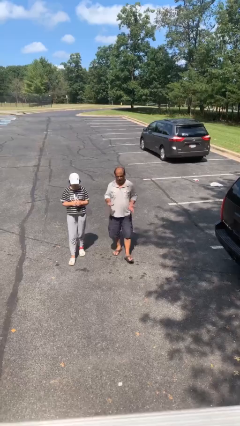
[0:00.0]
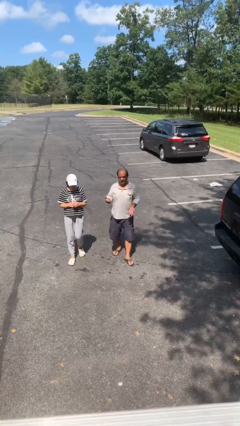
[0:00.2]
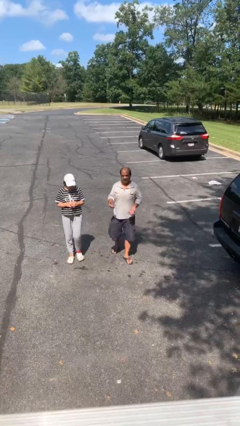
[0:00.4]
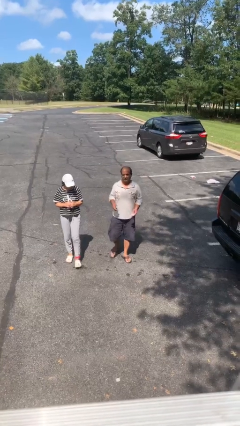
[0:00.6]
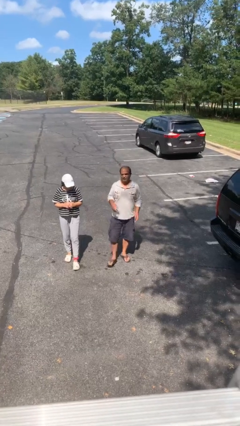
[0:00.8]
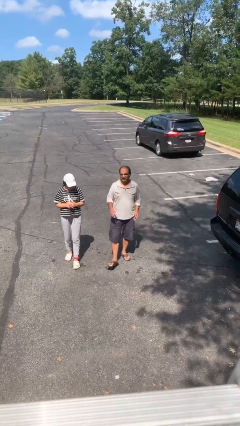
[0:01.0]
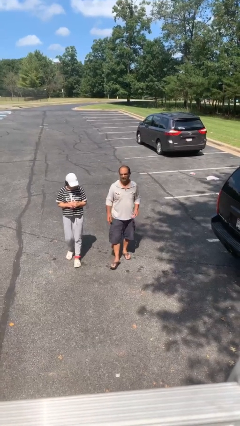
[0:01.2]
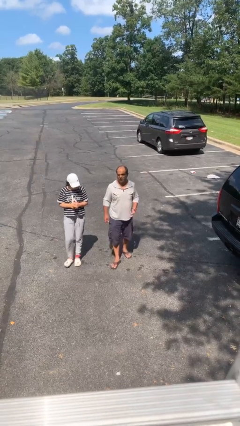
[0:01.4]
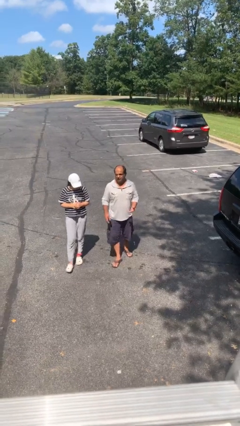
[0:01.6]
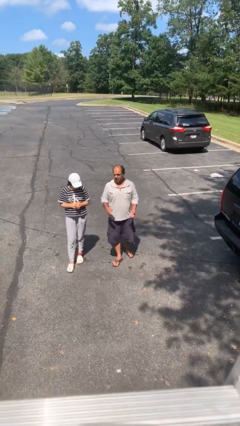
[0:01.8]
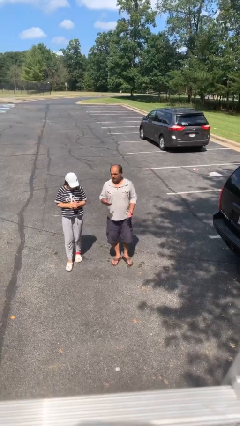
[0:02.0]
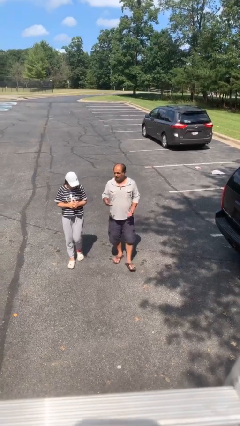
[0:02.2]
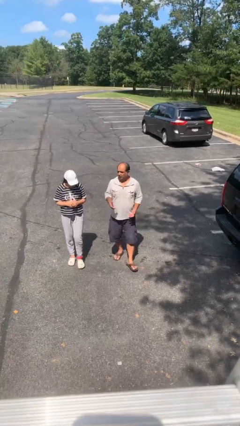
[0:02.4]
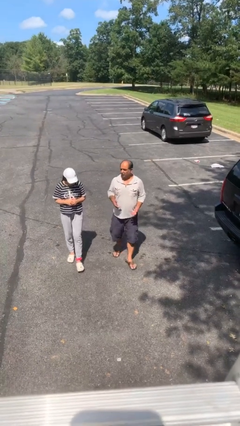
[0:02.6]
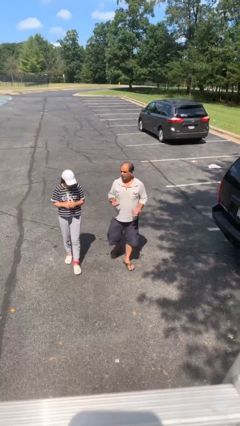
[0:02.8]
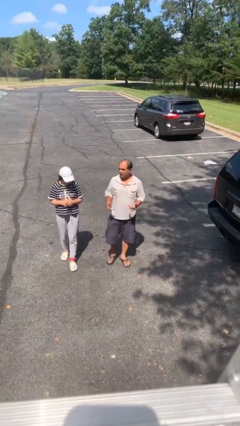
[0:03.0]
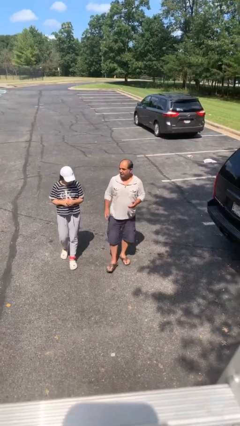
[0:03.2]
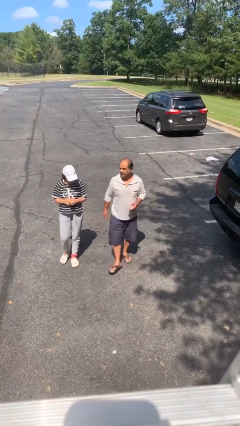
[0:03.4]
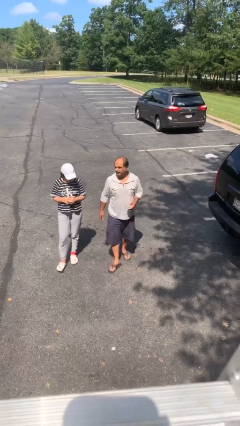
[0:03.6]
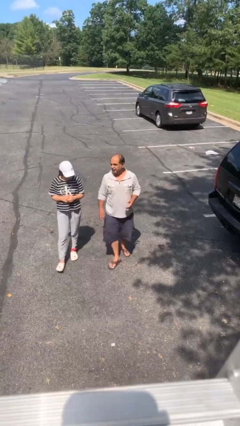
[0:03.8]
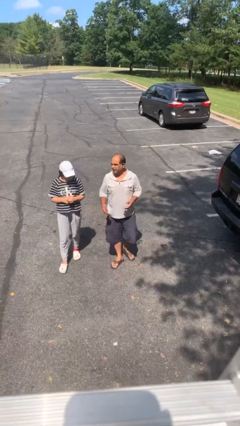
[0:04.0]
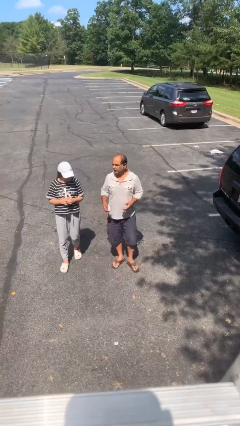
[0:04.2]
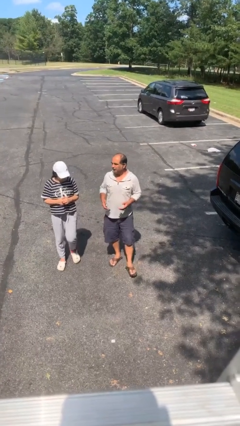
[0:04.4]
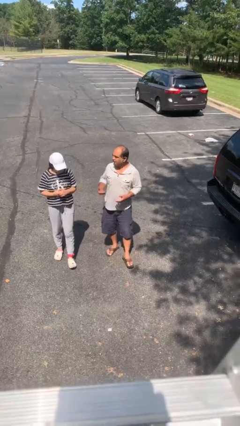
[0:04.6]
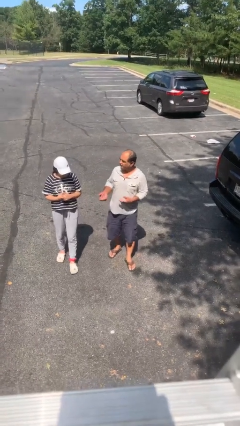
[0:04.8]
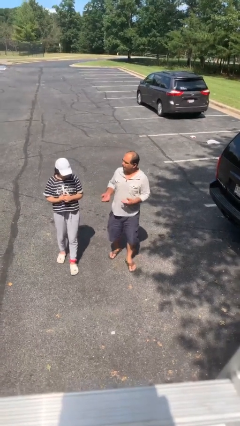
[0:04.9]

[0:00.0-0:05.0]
person talks to person

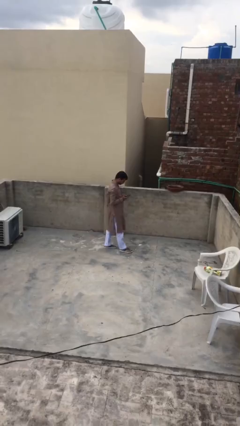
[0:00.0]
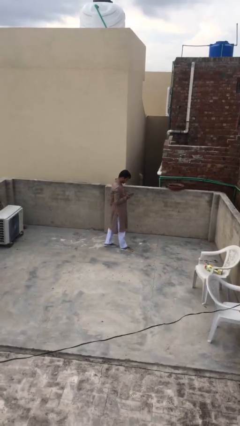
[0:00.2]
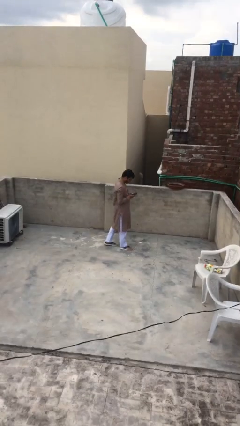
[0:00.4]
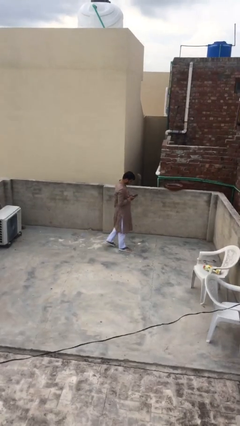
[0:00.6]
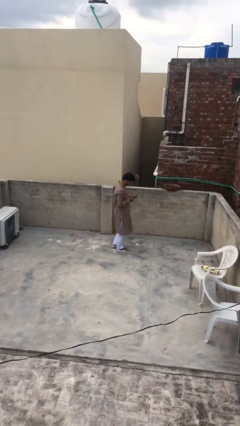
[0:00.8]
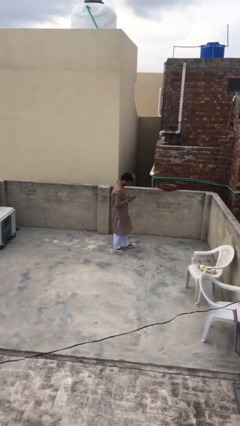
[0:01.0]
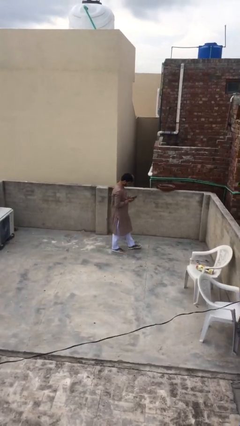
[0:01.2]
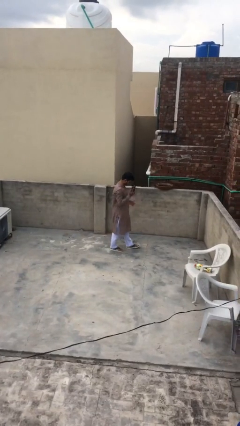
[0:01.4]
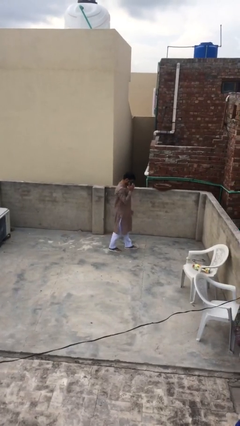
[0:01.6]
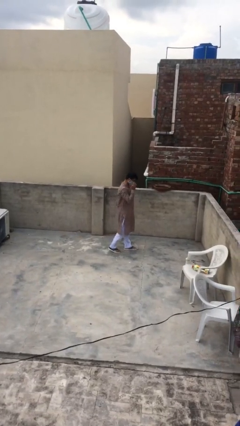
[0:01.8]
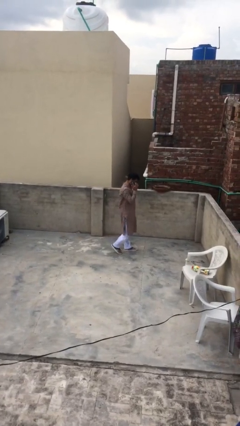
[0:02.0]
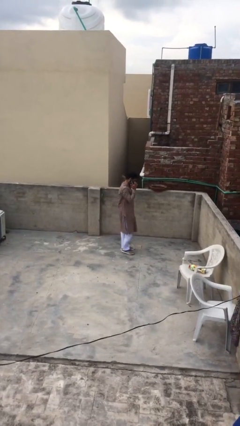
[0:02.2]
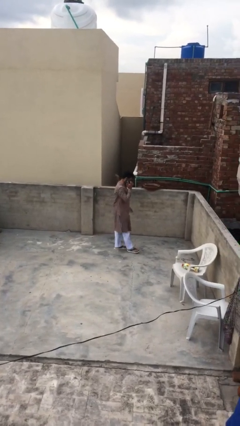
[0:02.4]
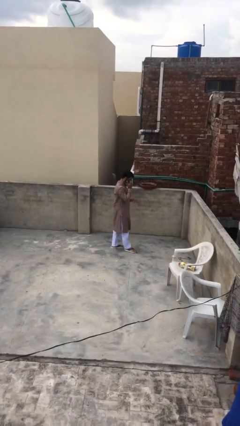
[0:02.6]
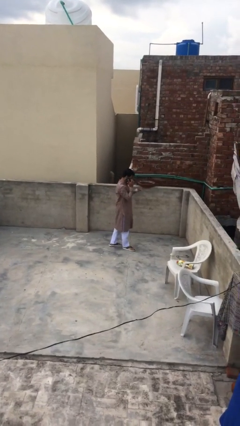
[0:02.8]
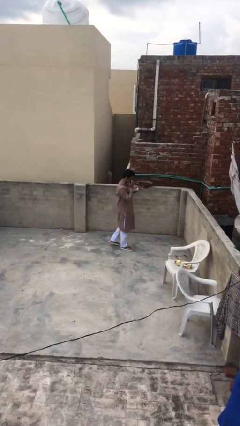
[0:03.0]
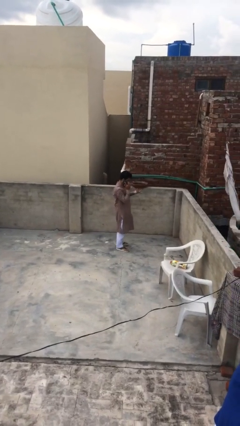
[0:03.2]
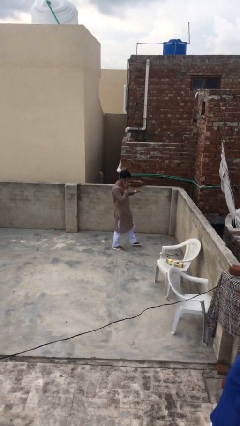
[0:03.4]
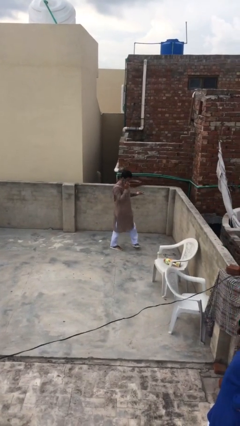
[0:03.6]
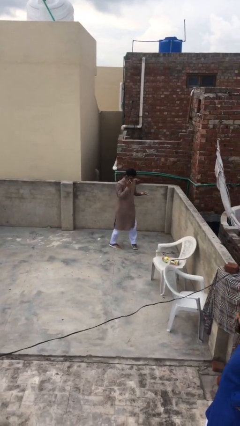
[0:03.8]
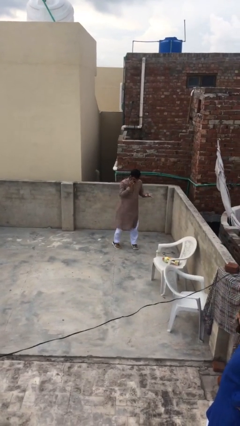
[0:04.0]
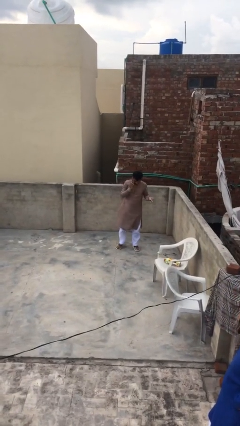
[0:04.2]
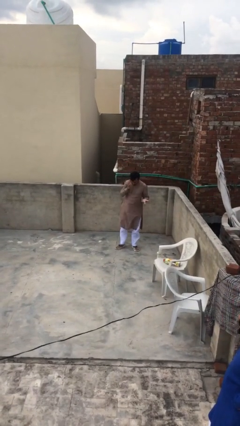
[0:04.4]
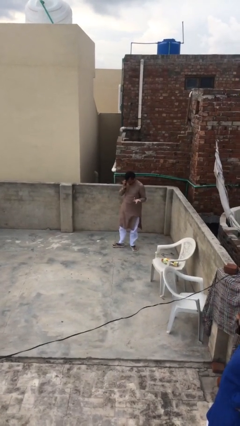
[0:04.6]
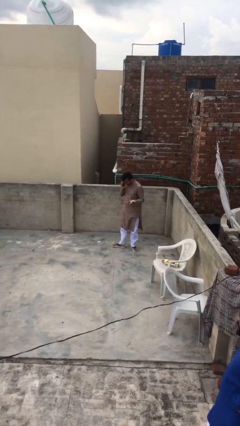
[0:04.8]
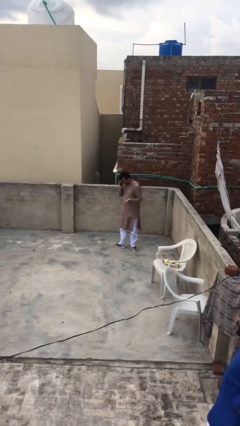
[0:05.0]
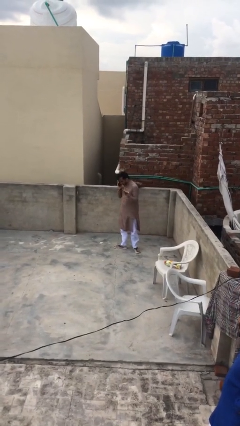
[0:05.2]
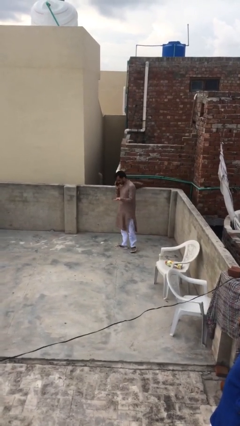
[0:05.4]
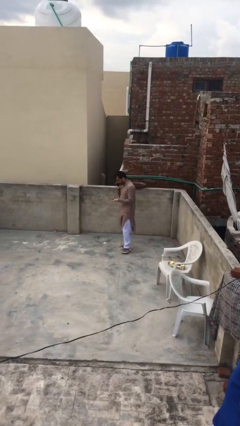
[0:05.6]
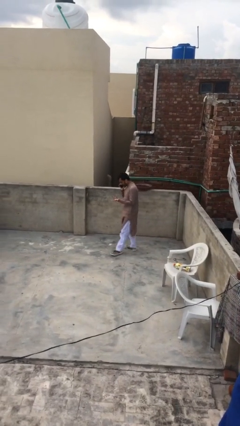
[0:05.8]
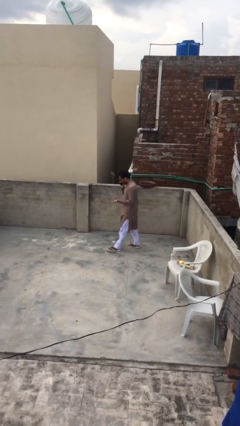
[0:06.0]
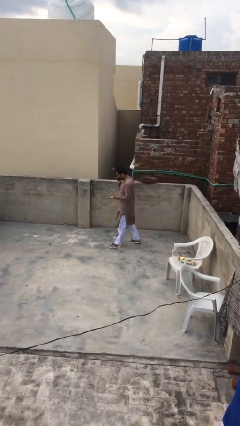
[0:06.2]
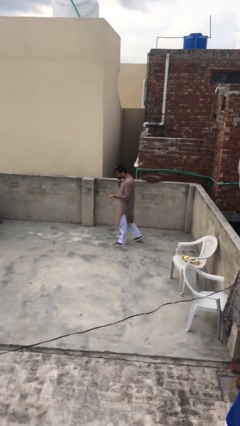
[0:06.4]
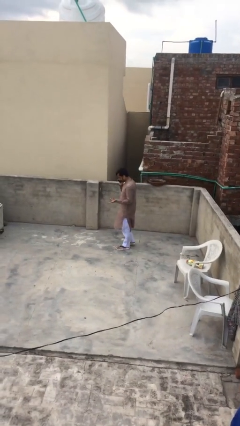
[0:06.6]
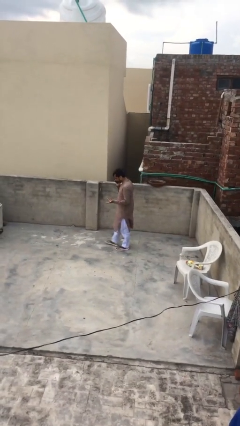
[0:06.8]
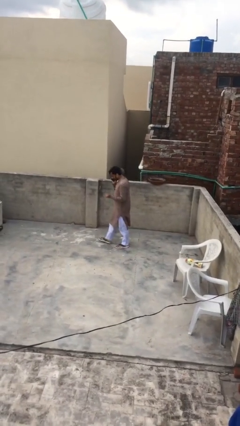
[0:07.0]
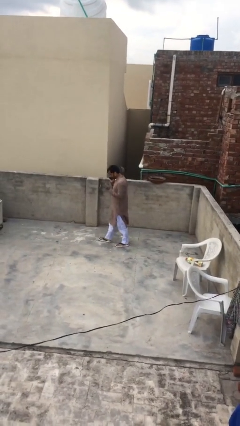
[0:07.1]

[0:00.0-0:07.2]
person talks on phone

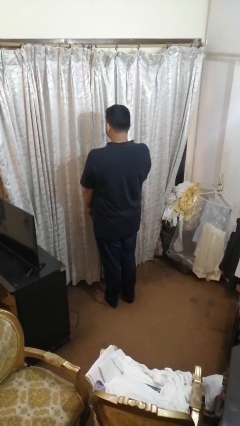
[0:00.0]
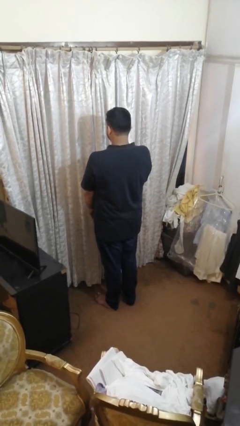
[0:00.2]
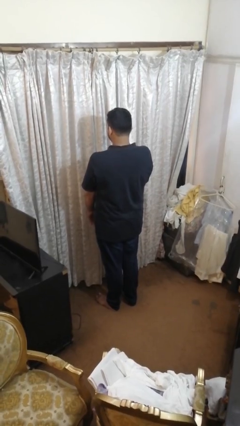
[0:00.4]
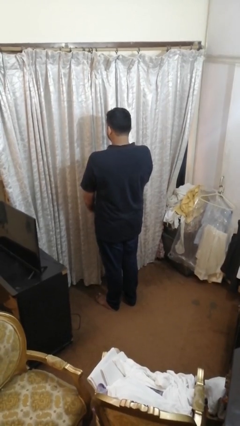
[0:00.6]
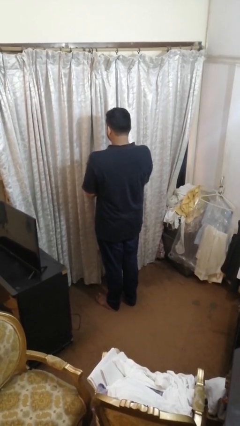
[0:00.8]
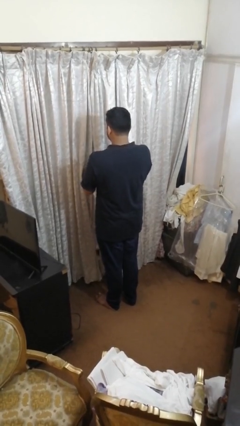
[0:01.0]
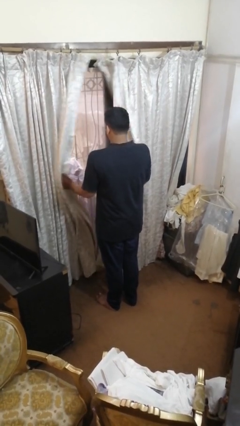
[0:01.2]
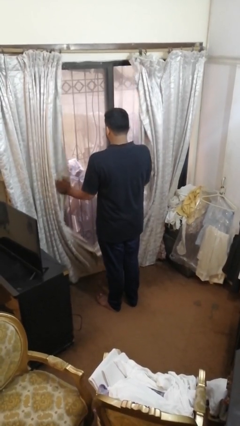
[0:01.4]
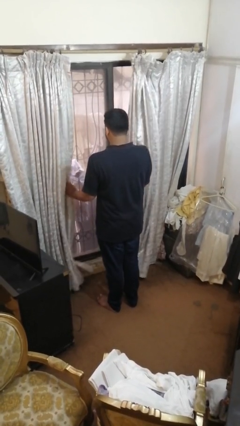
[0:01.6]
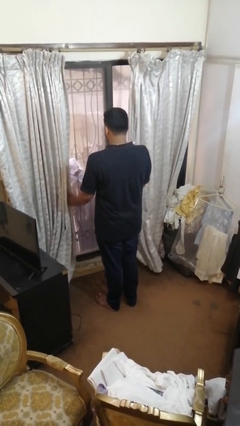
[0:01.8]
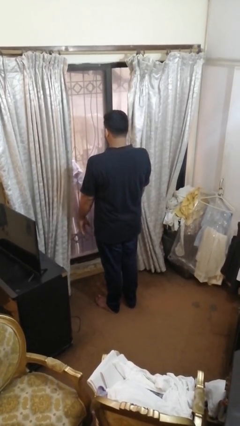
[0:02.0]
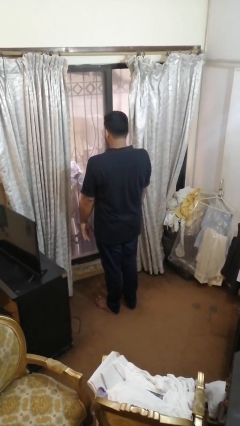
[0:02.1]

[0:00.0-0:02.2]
person opens curtains

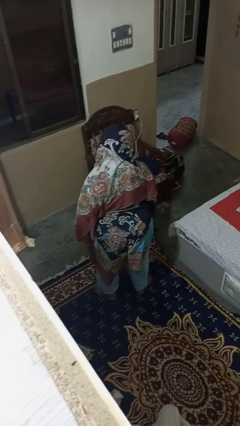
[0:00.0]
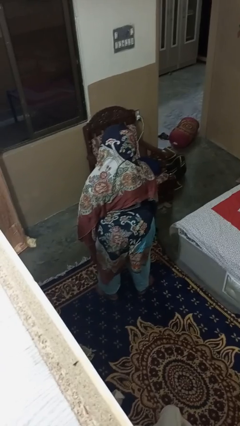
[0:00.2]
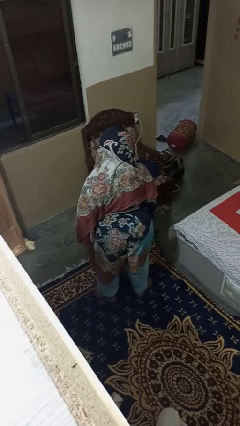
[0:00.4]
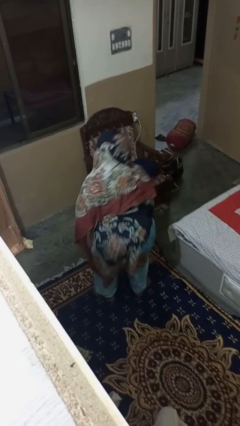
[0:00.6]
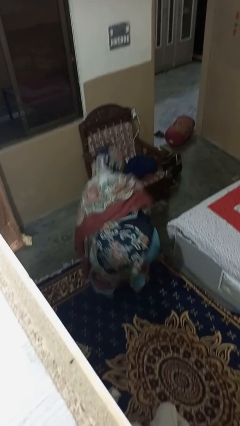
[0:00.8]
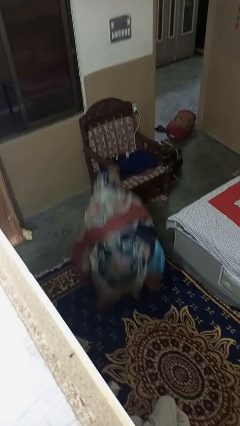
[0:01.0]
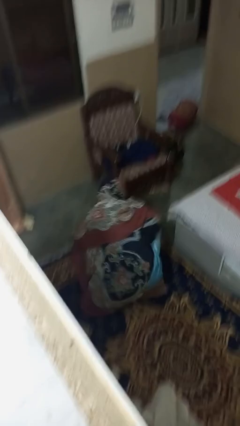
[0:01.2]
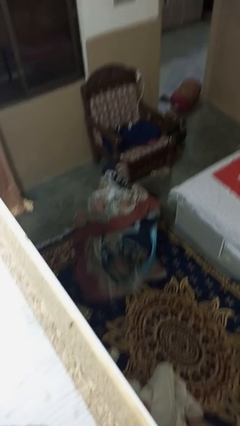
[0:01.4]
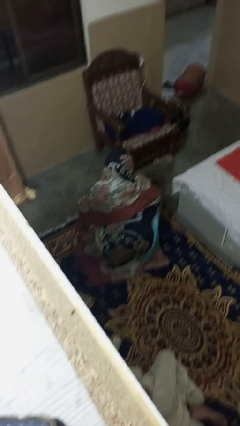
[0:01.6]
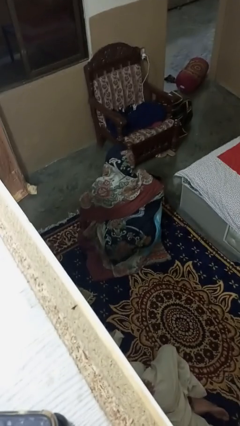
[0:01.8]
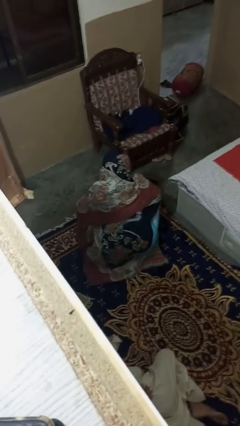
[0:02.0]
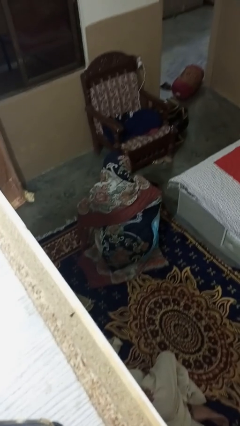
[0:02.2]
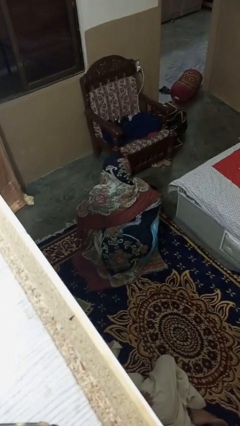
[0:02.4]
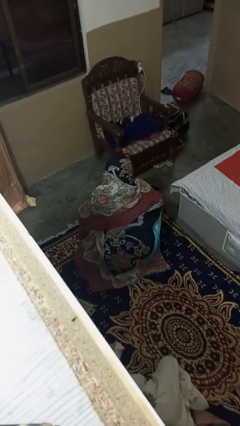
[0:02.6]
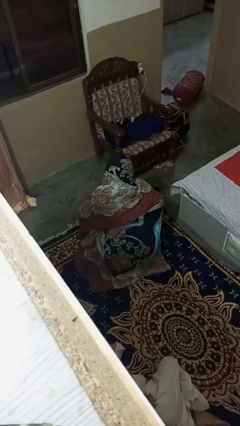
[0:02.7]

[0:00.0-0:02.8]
person squats

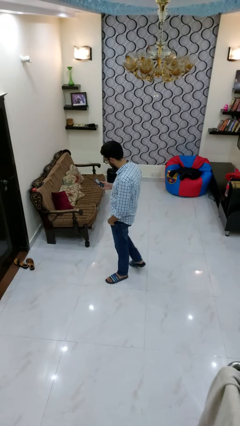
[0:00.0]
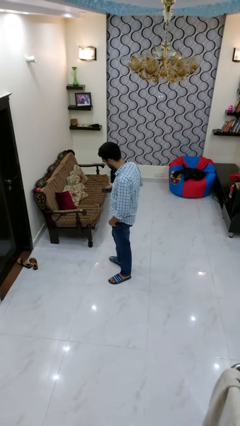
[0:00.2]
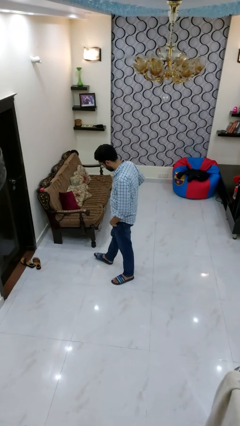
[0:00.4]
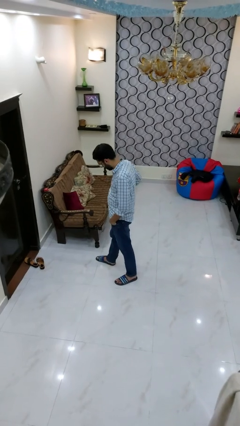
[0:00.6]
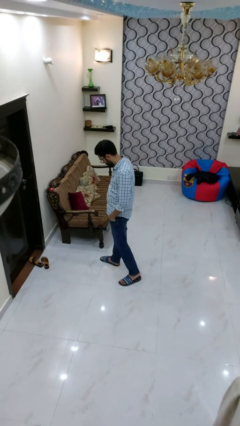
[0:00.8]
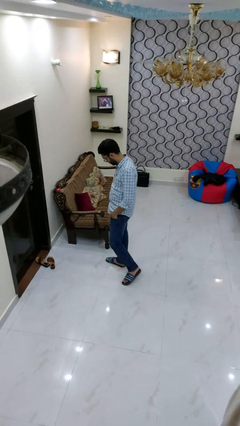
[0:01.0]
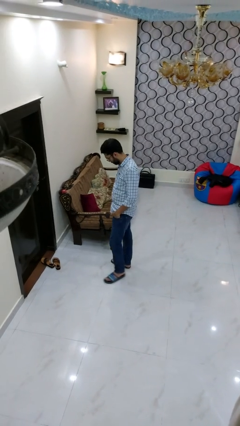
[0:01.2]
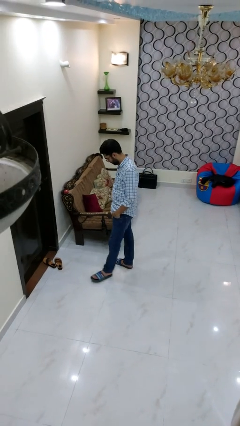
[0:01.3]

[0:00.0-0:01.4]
person puts phone into pocket
